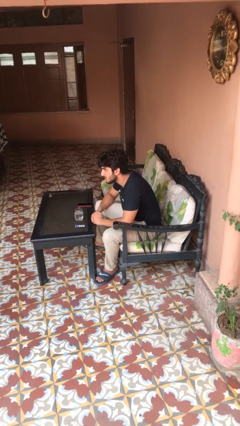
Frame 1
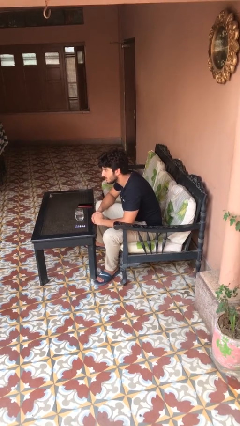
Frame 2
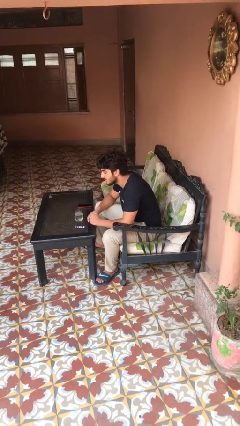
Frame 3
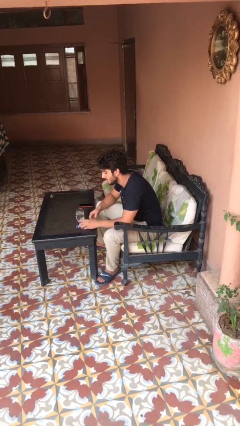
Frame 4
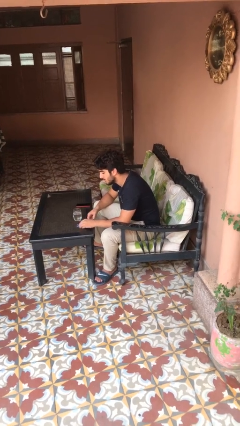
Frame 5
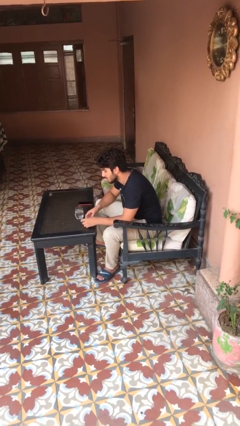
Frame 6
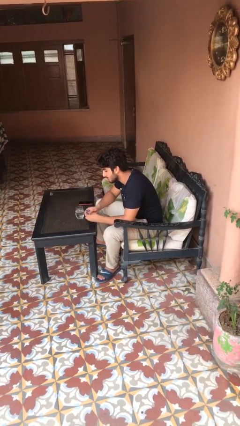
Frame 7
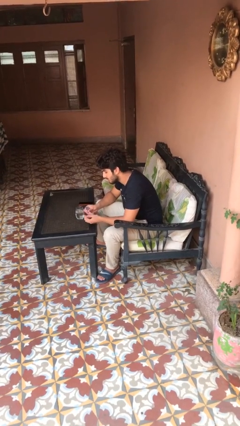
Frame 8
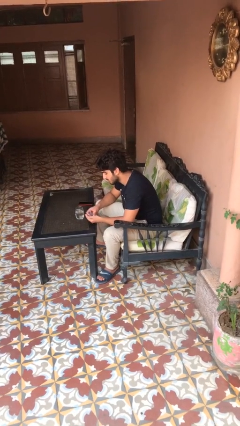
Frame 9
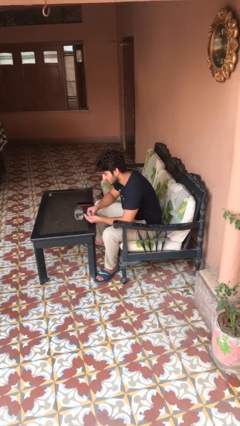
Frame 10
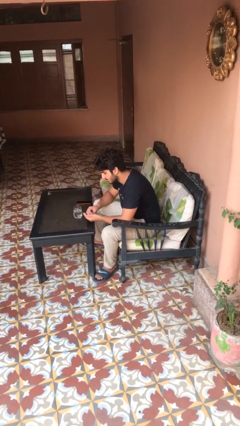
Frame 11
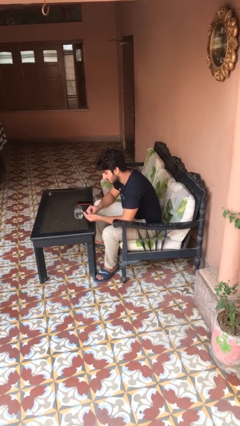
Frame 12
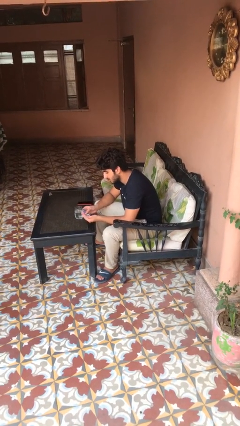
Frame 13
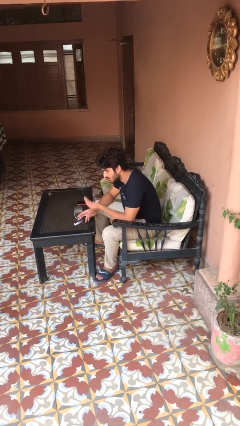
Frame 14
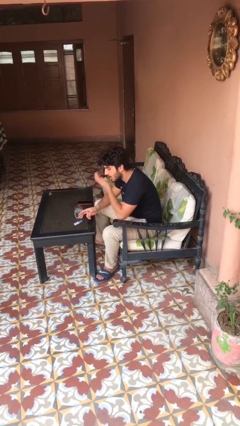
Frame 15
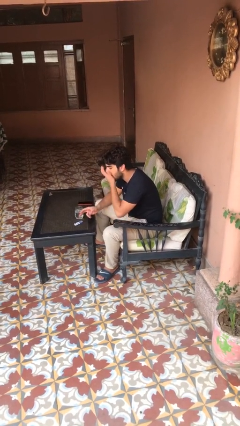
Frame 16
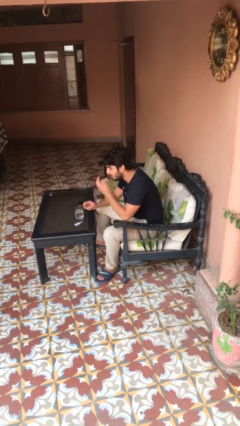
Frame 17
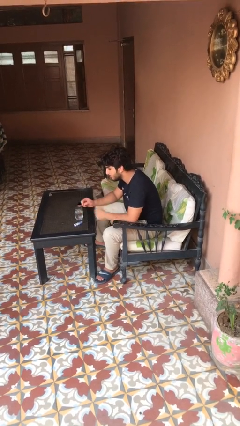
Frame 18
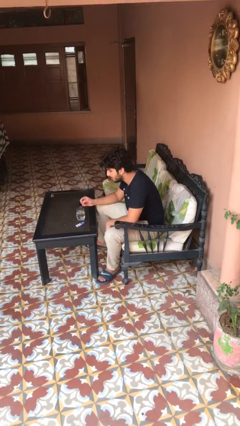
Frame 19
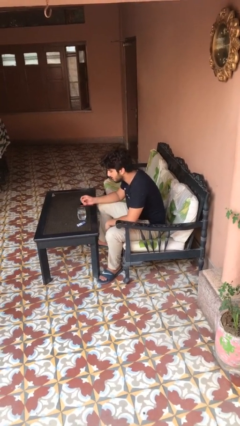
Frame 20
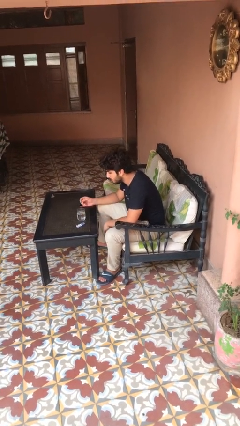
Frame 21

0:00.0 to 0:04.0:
person takes medicine pills

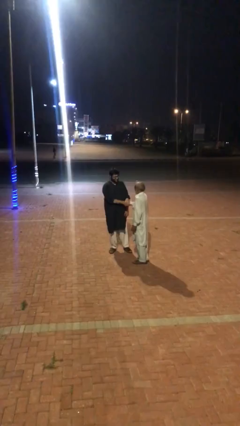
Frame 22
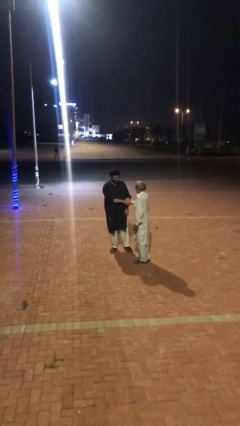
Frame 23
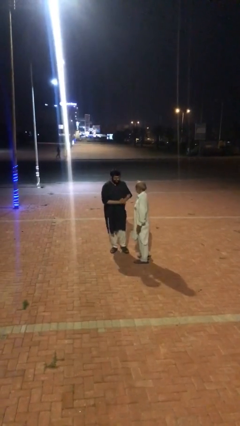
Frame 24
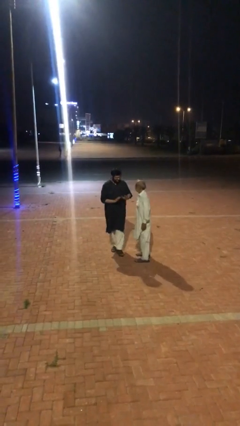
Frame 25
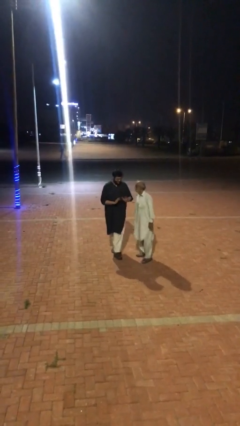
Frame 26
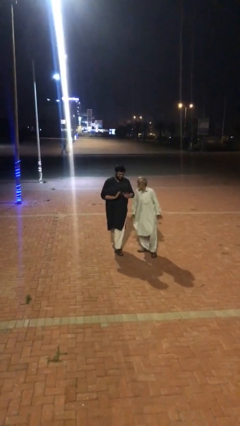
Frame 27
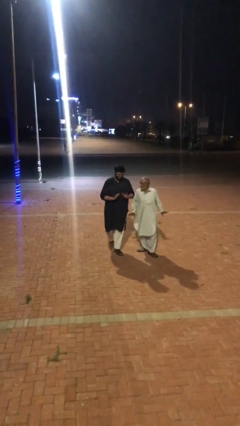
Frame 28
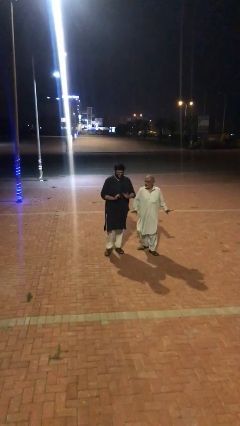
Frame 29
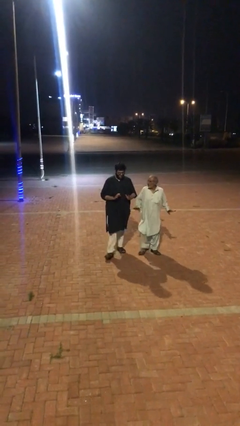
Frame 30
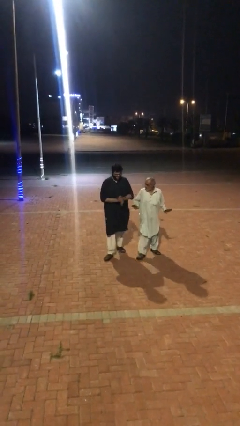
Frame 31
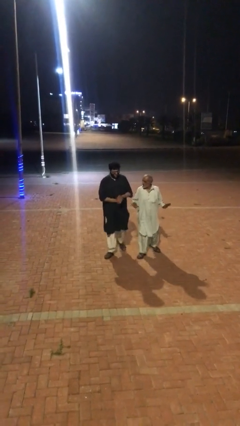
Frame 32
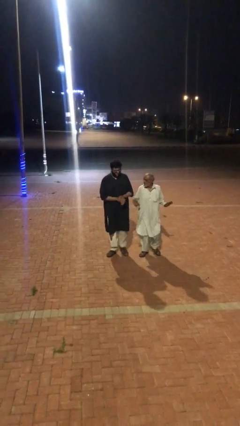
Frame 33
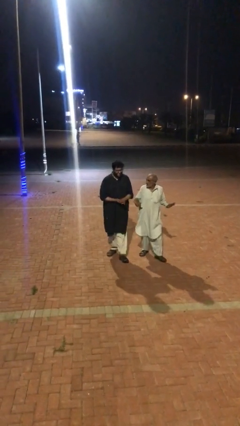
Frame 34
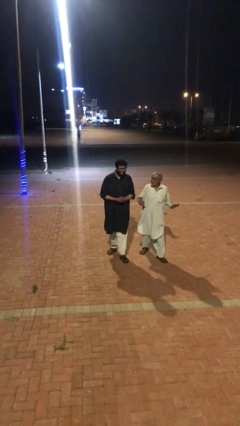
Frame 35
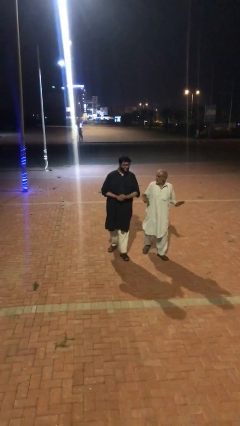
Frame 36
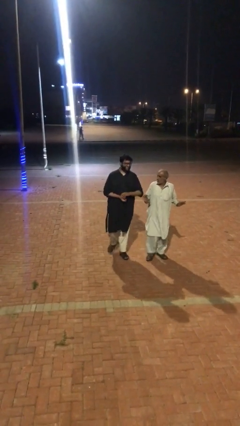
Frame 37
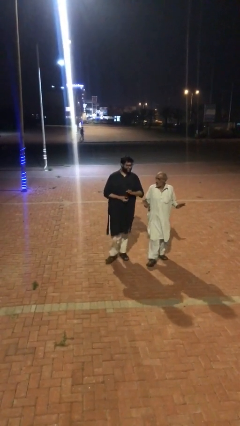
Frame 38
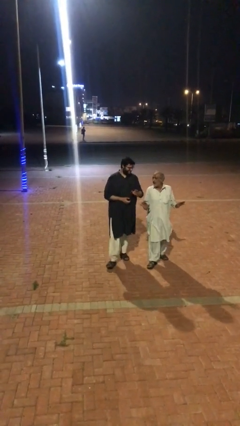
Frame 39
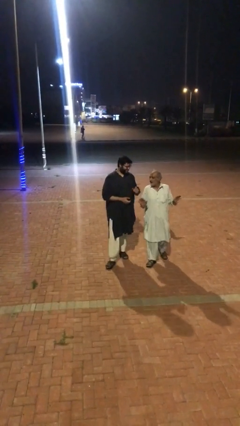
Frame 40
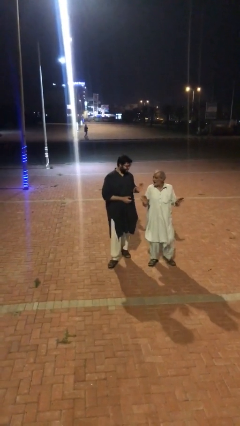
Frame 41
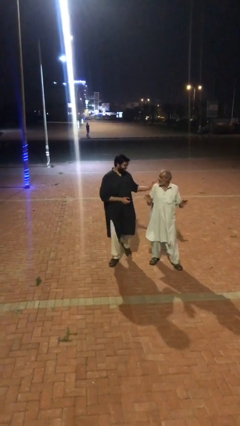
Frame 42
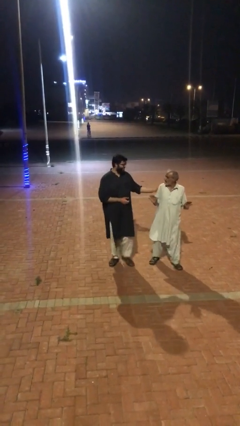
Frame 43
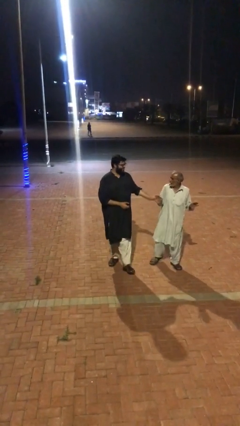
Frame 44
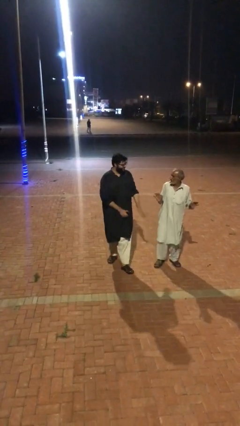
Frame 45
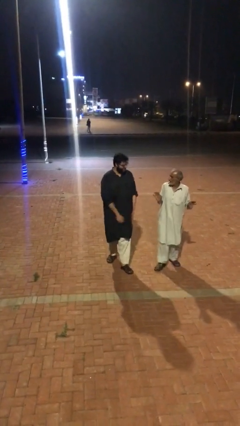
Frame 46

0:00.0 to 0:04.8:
person talks to person

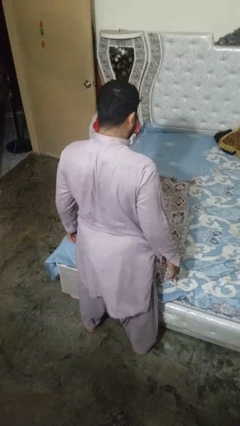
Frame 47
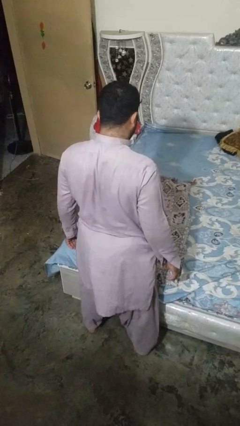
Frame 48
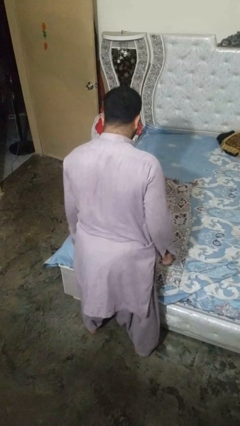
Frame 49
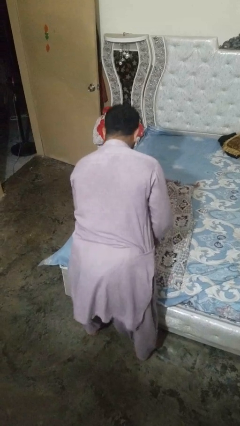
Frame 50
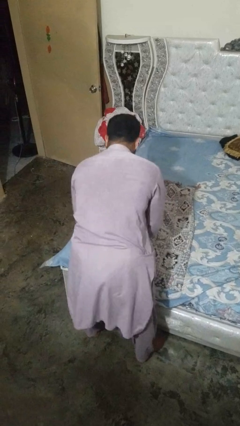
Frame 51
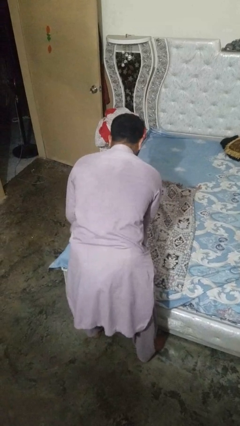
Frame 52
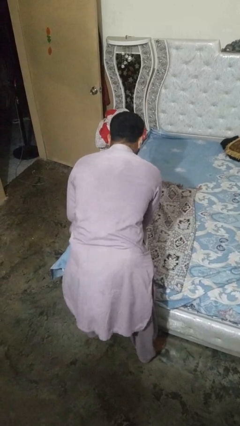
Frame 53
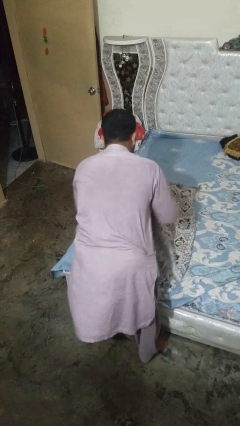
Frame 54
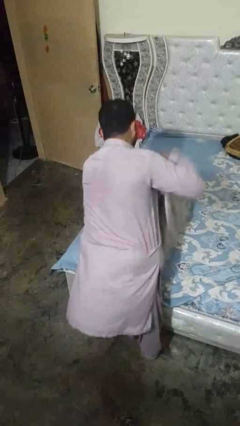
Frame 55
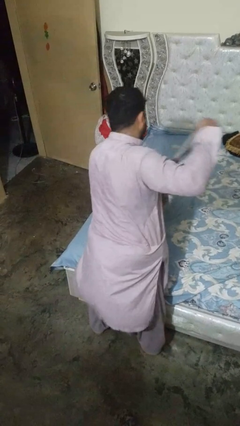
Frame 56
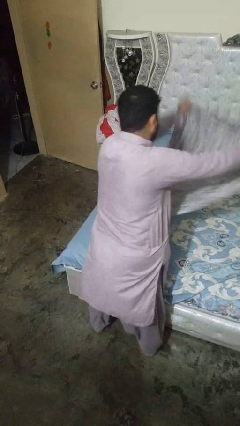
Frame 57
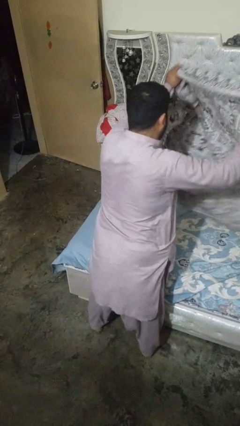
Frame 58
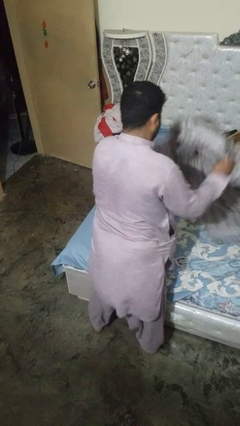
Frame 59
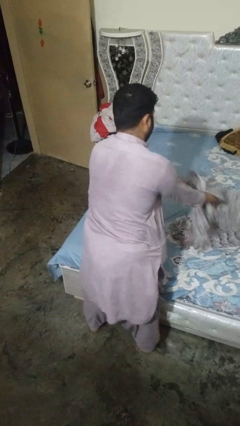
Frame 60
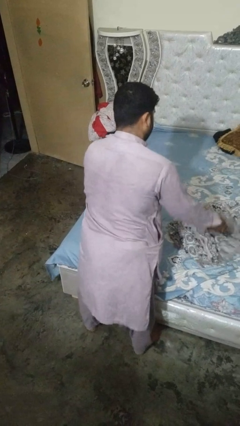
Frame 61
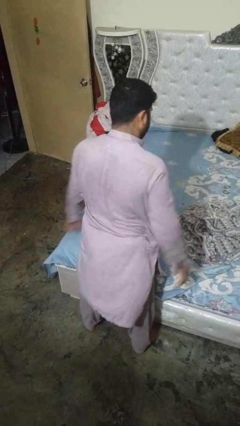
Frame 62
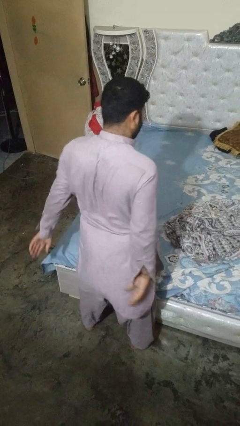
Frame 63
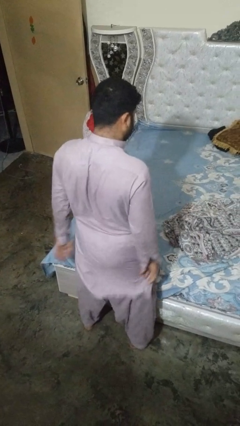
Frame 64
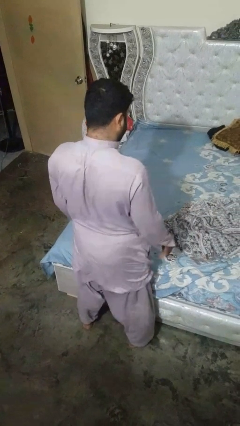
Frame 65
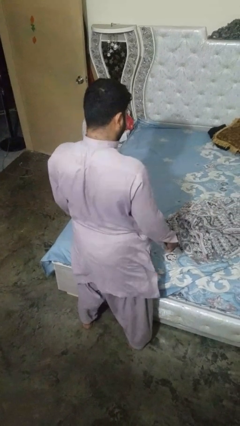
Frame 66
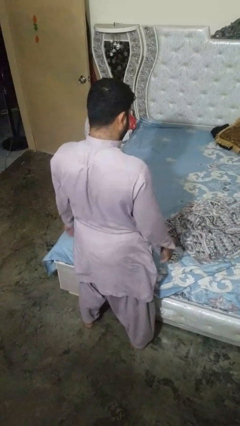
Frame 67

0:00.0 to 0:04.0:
person unfolds blanket

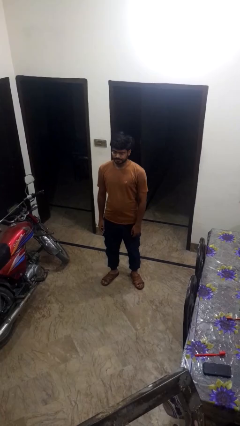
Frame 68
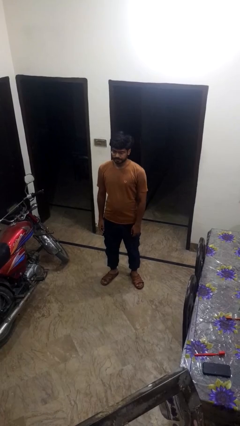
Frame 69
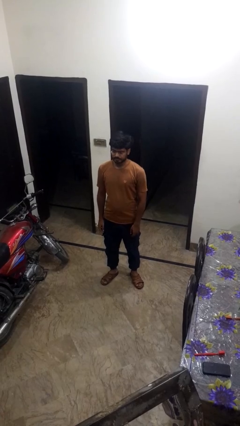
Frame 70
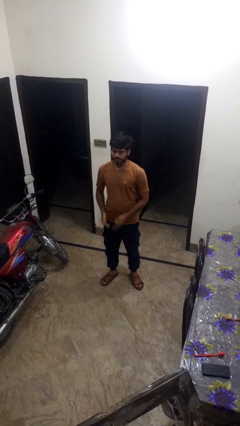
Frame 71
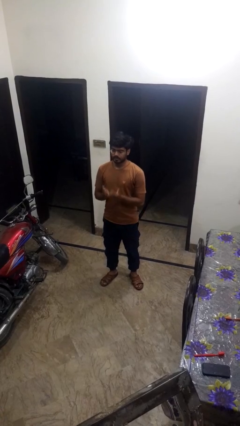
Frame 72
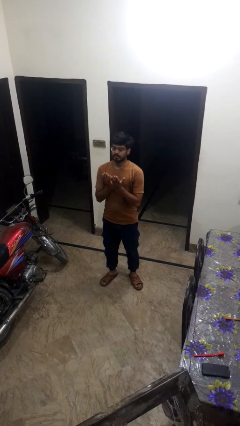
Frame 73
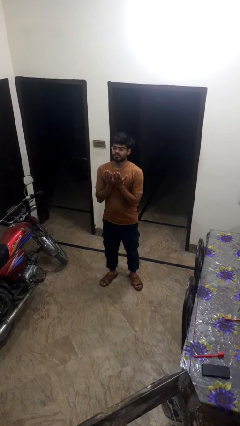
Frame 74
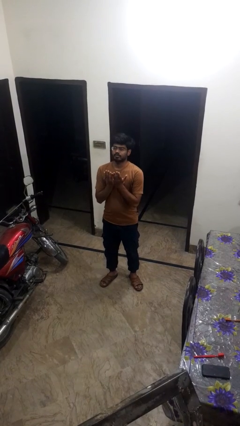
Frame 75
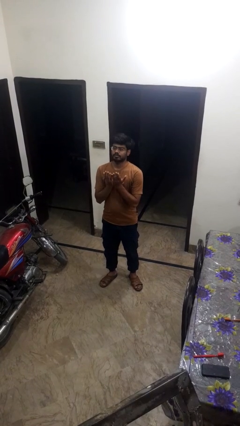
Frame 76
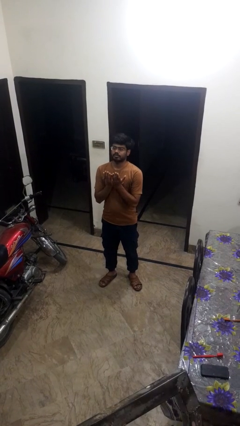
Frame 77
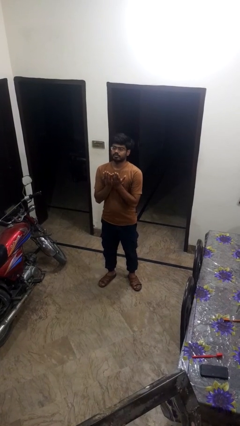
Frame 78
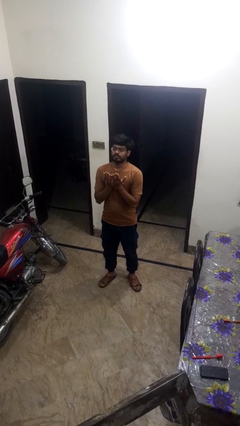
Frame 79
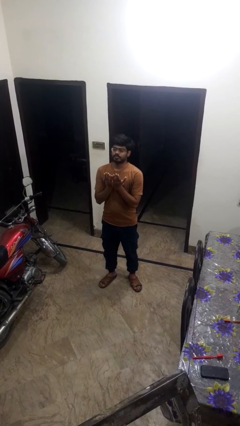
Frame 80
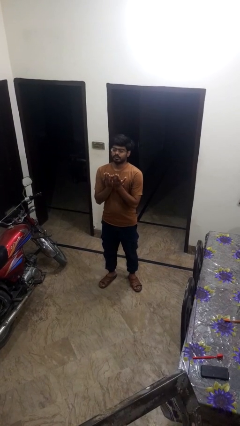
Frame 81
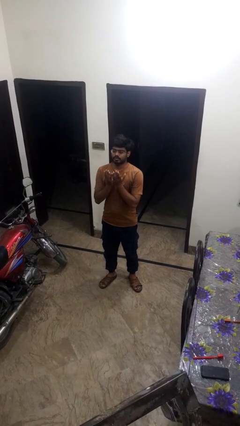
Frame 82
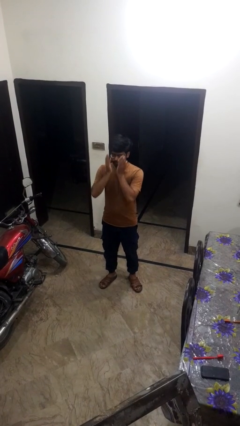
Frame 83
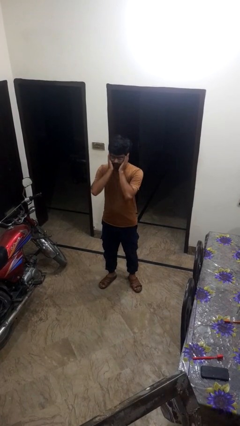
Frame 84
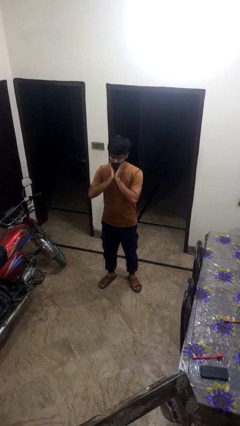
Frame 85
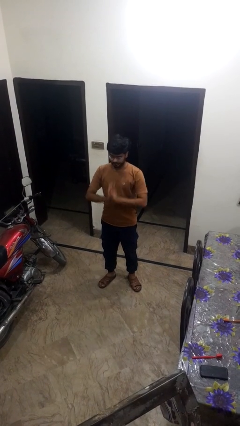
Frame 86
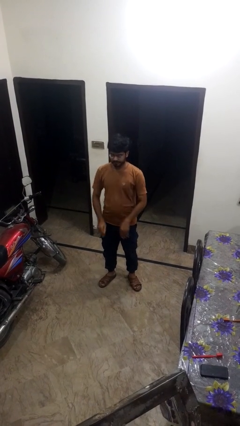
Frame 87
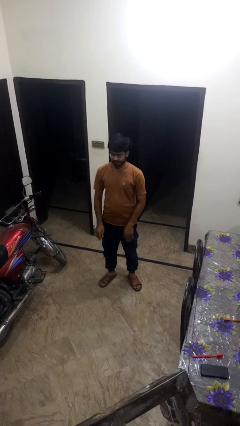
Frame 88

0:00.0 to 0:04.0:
person prays

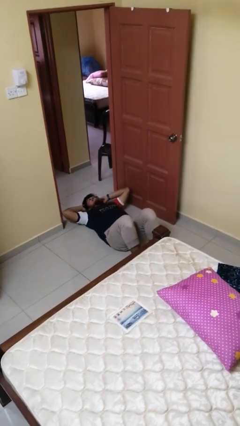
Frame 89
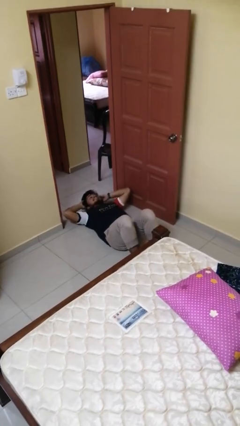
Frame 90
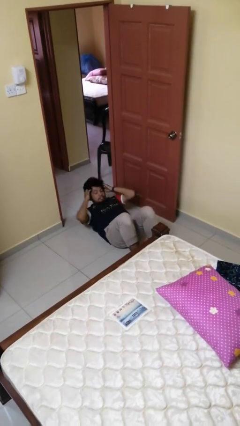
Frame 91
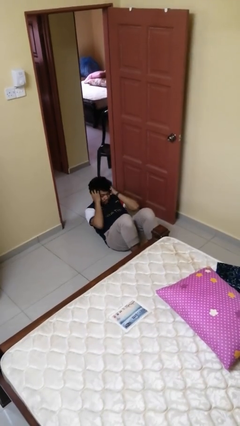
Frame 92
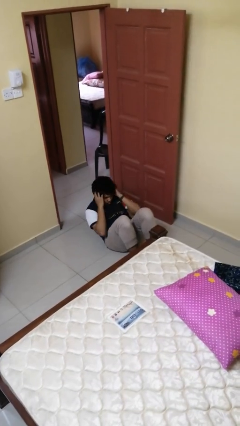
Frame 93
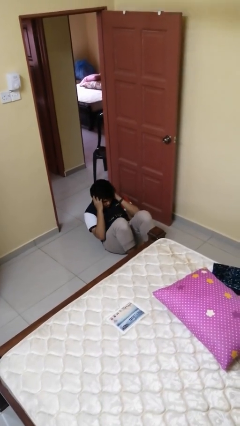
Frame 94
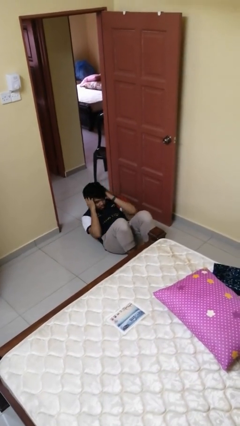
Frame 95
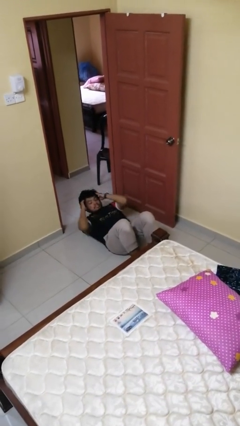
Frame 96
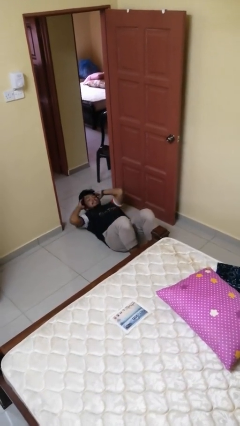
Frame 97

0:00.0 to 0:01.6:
person exercises with situp
